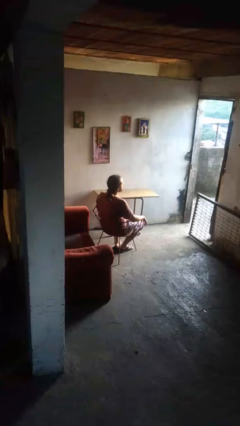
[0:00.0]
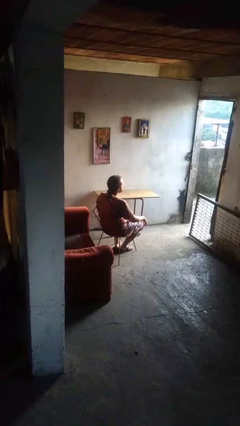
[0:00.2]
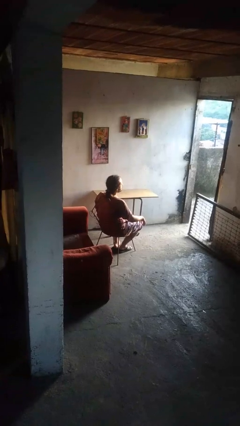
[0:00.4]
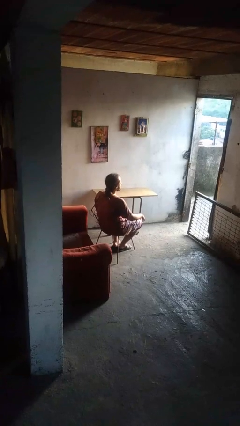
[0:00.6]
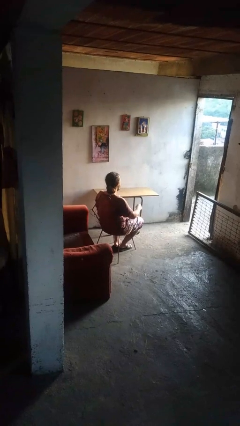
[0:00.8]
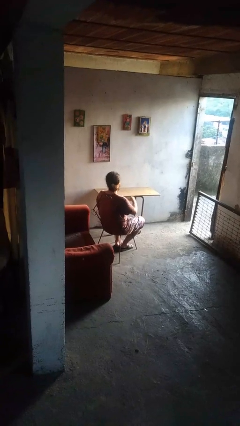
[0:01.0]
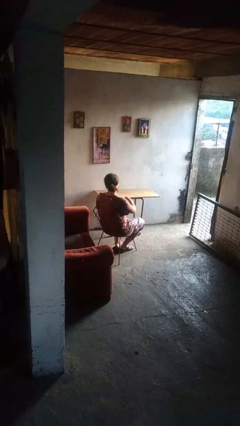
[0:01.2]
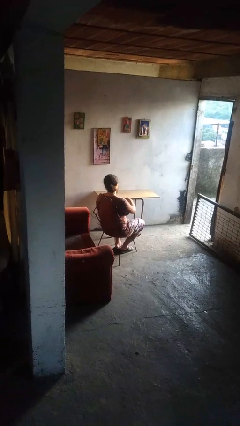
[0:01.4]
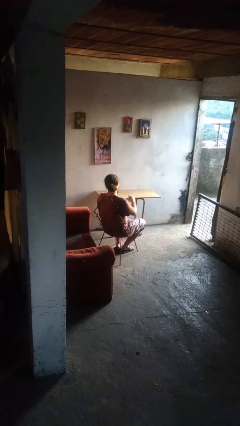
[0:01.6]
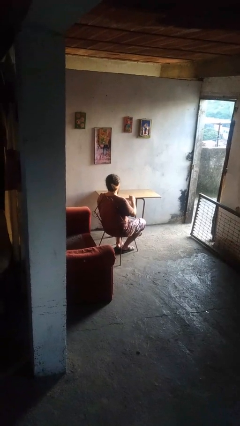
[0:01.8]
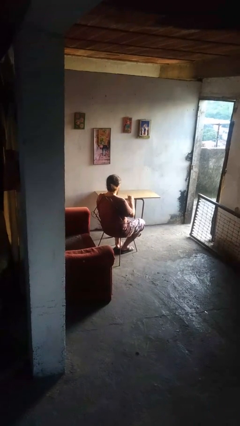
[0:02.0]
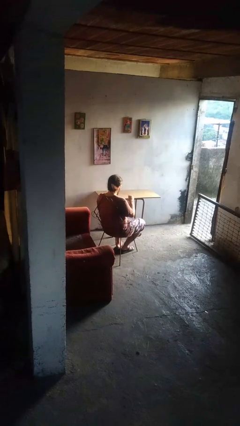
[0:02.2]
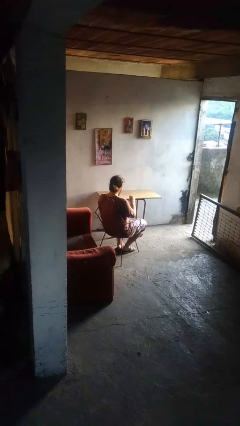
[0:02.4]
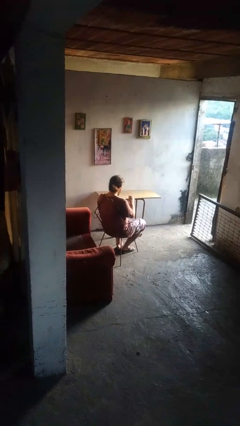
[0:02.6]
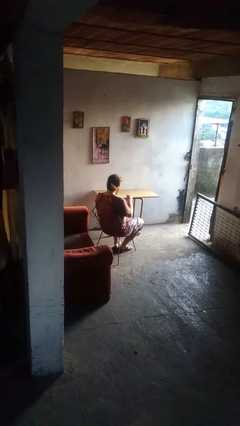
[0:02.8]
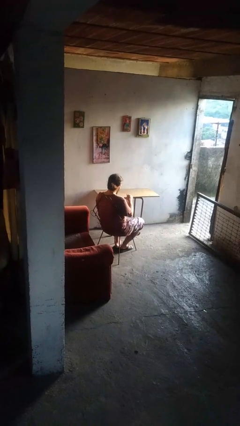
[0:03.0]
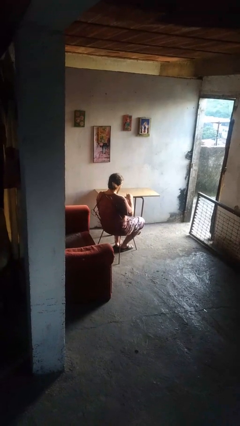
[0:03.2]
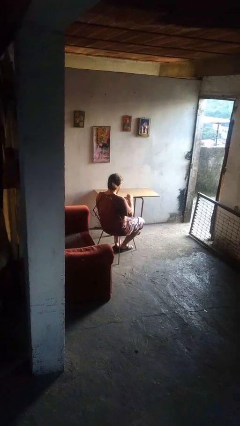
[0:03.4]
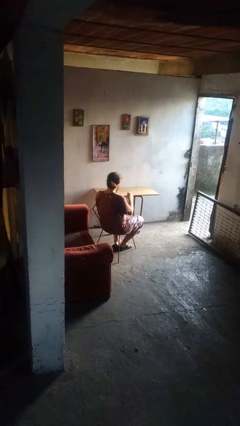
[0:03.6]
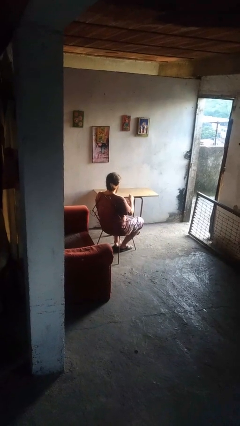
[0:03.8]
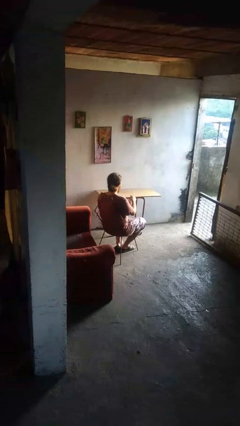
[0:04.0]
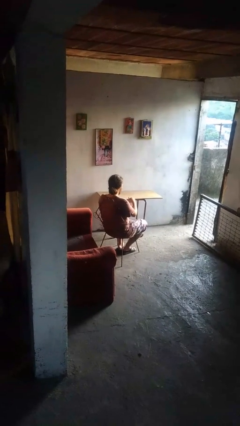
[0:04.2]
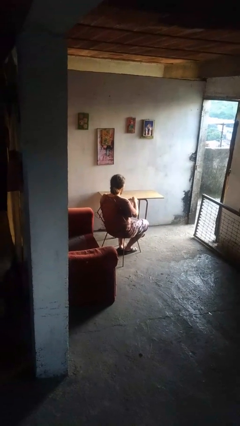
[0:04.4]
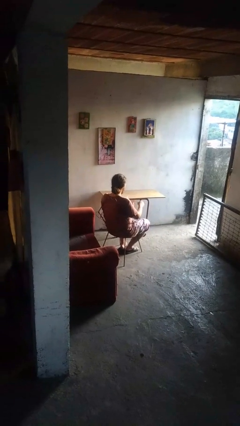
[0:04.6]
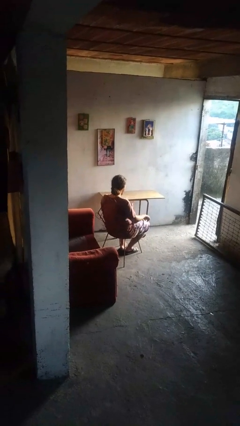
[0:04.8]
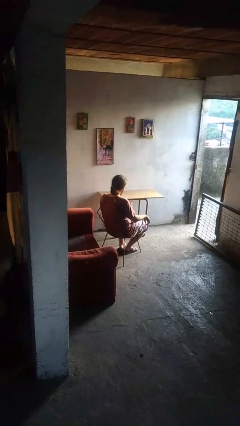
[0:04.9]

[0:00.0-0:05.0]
person stirs mug

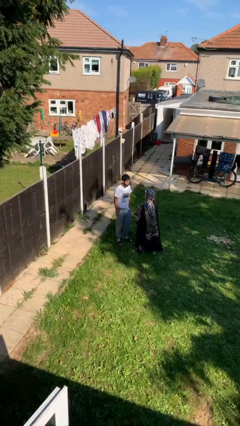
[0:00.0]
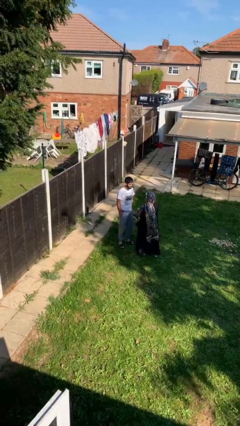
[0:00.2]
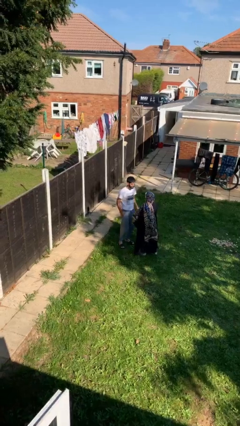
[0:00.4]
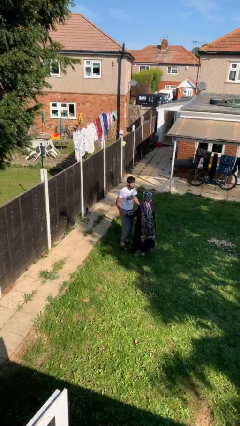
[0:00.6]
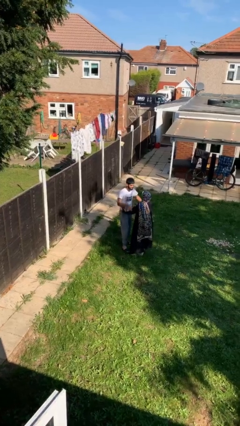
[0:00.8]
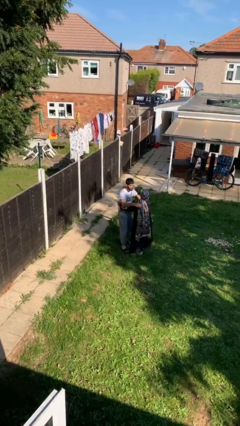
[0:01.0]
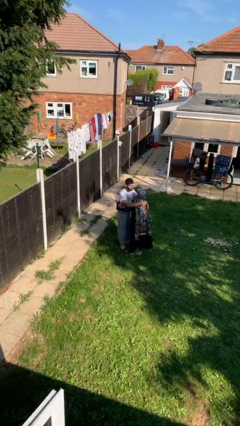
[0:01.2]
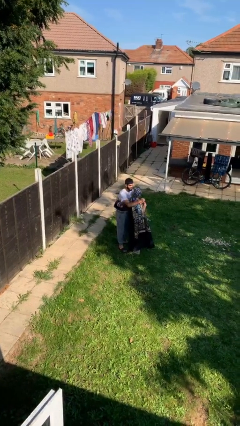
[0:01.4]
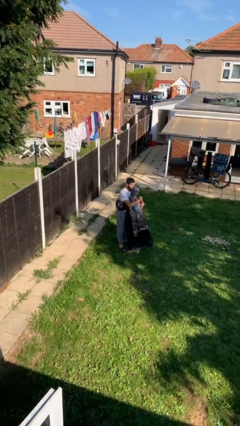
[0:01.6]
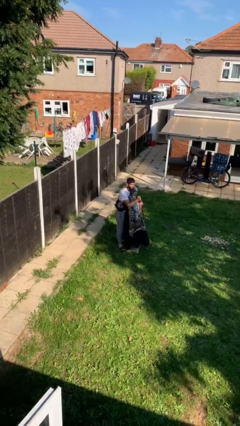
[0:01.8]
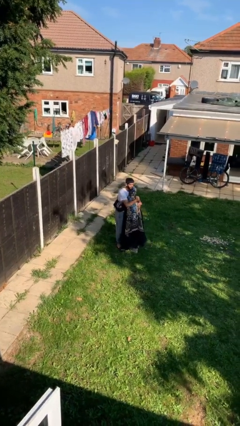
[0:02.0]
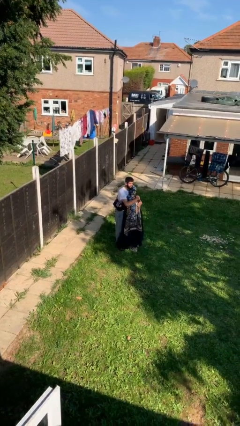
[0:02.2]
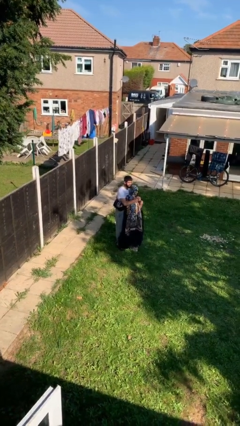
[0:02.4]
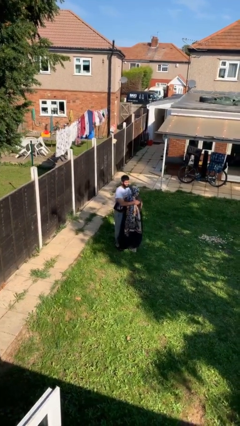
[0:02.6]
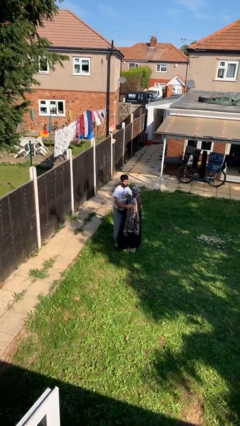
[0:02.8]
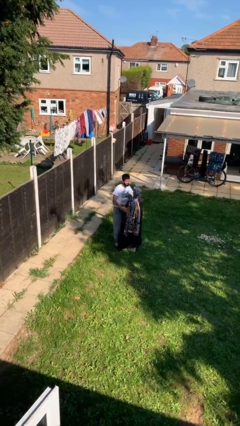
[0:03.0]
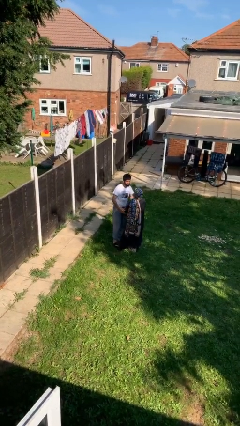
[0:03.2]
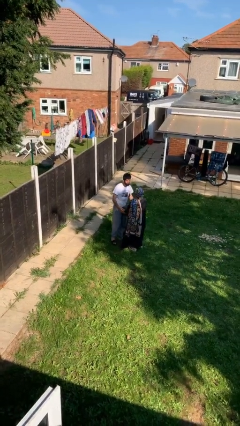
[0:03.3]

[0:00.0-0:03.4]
person embraces person

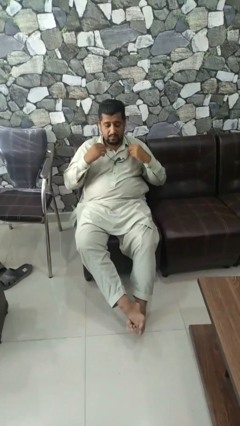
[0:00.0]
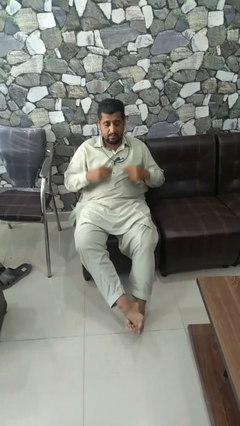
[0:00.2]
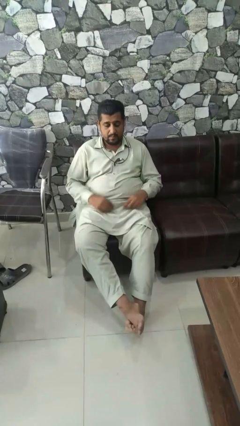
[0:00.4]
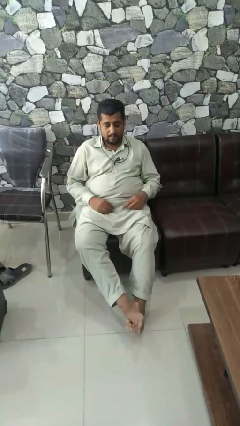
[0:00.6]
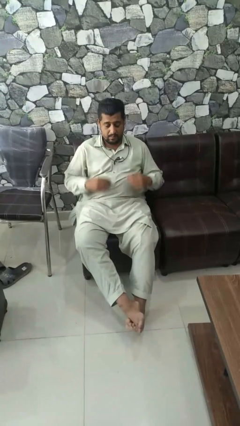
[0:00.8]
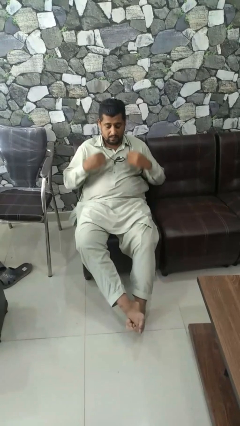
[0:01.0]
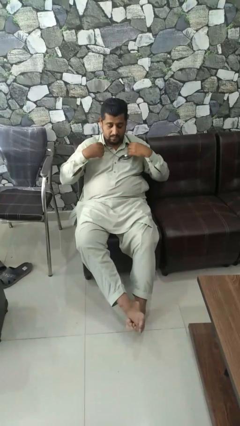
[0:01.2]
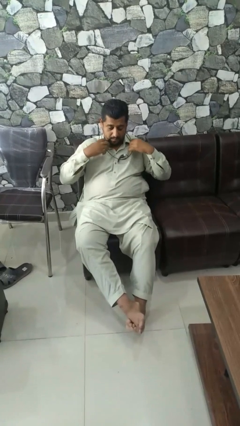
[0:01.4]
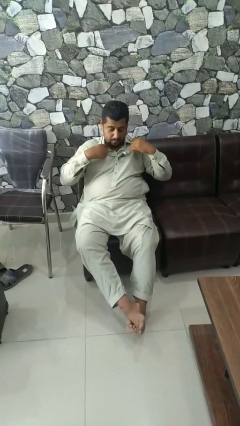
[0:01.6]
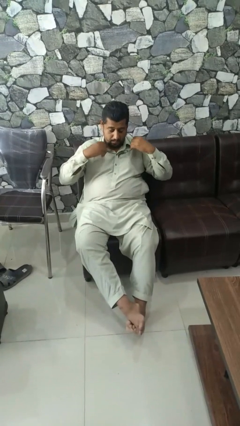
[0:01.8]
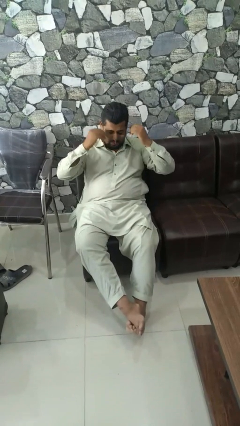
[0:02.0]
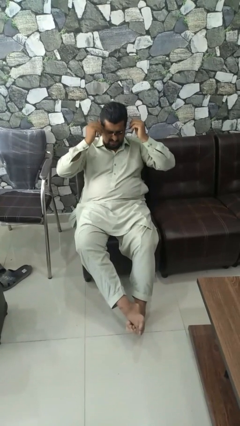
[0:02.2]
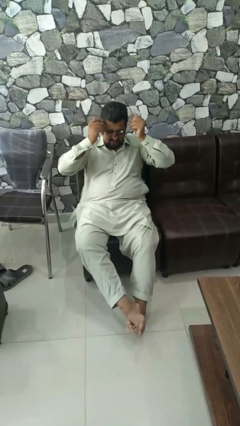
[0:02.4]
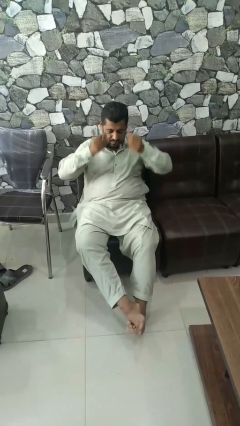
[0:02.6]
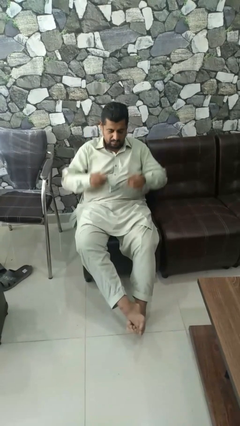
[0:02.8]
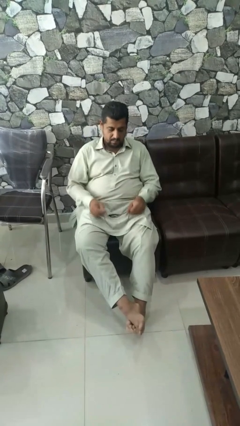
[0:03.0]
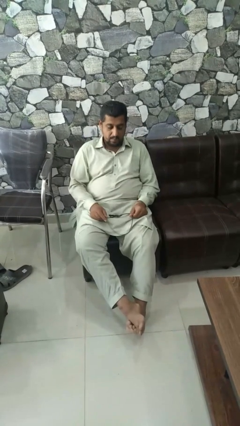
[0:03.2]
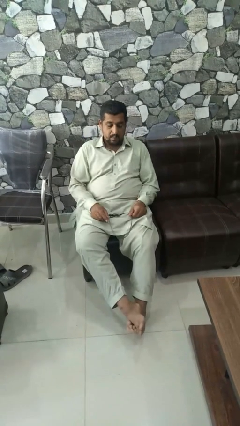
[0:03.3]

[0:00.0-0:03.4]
person takes off necklace

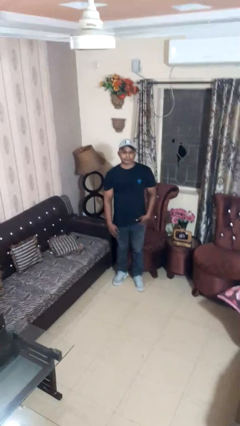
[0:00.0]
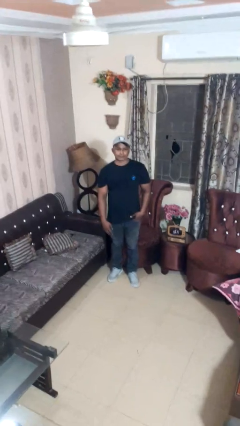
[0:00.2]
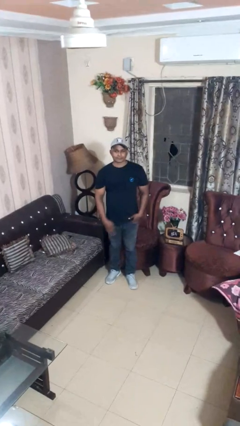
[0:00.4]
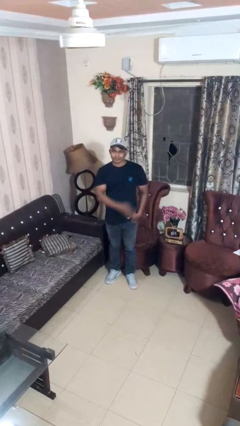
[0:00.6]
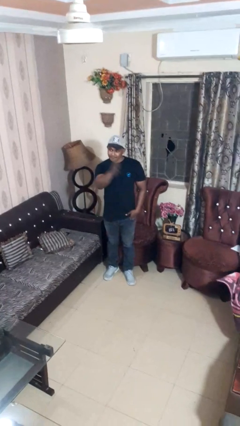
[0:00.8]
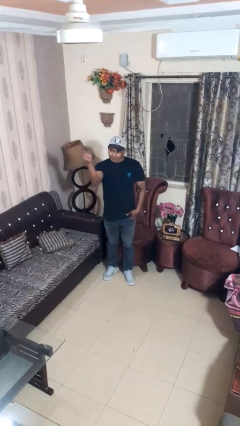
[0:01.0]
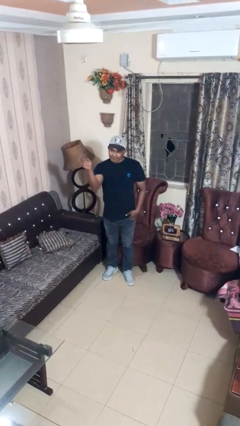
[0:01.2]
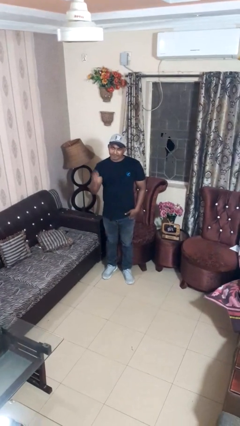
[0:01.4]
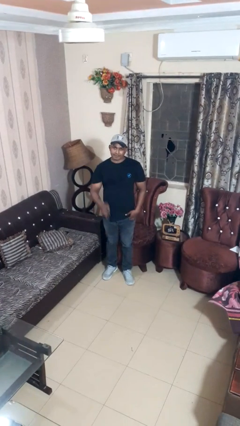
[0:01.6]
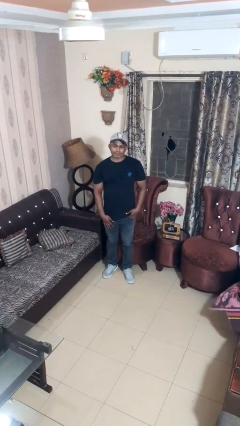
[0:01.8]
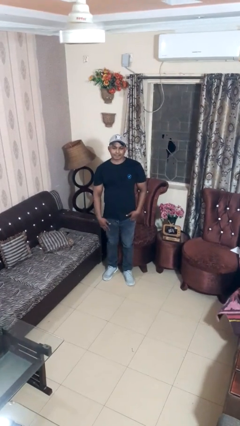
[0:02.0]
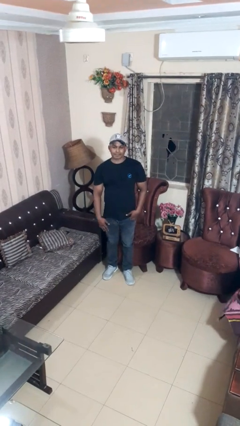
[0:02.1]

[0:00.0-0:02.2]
person gestures swipe left

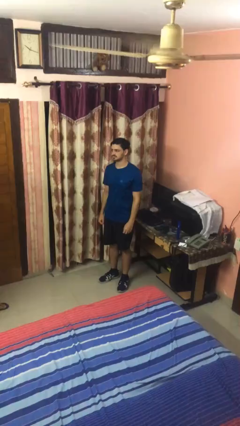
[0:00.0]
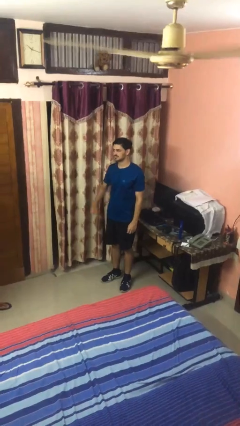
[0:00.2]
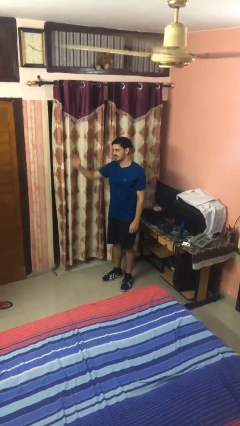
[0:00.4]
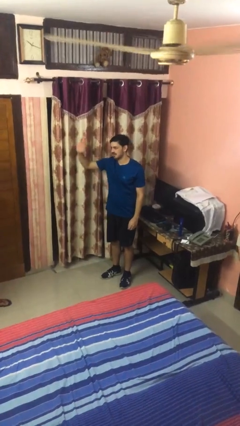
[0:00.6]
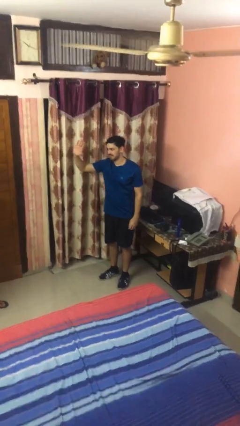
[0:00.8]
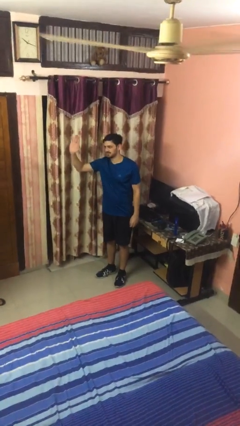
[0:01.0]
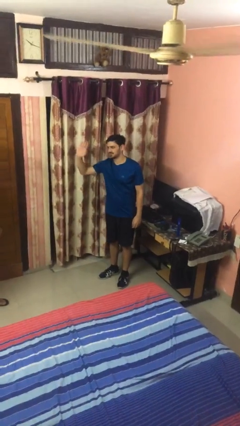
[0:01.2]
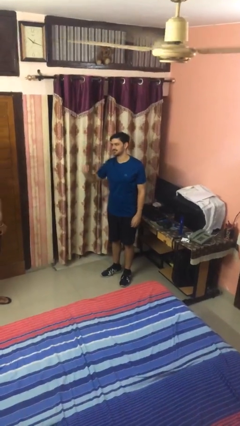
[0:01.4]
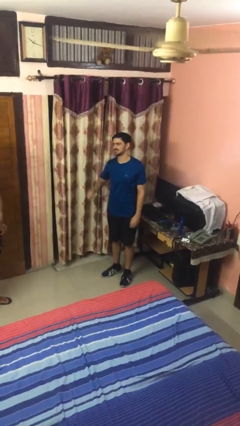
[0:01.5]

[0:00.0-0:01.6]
person waves at person

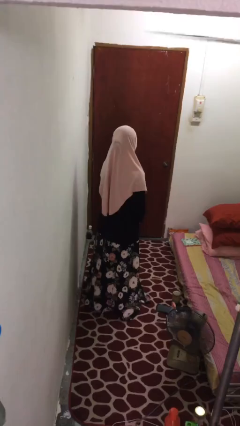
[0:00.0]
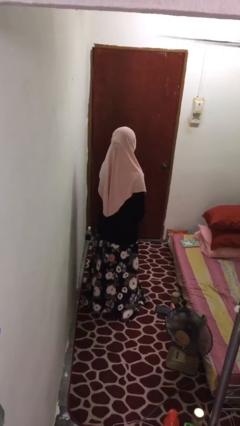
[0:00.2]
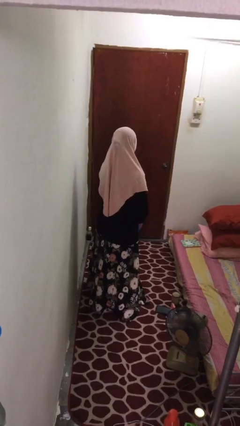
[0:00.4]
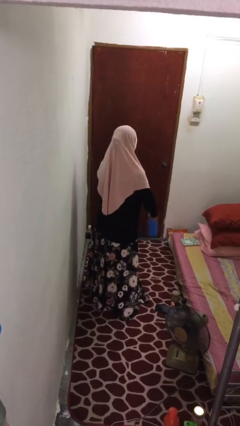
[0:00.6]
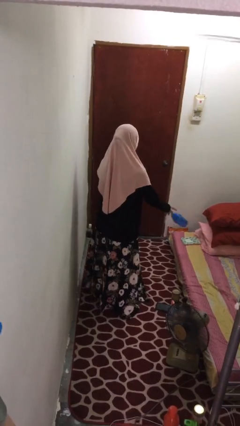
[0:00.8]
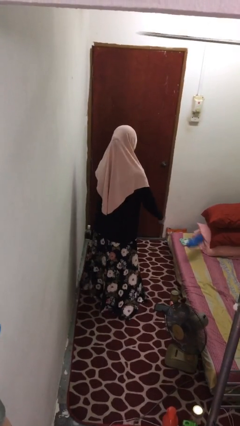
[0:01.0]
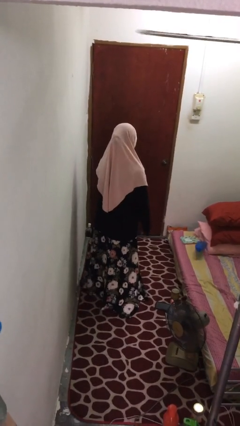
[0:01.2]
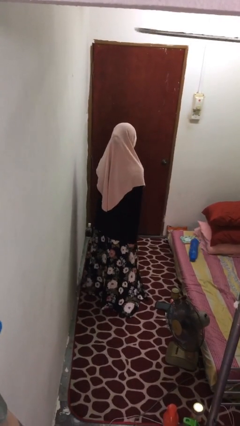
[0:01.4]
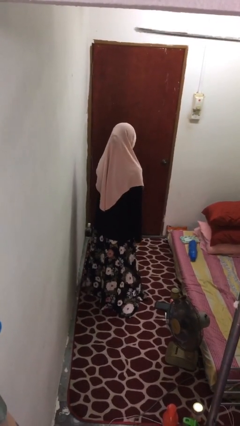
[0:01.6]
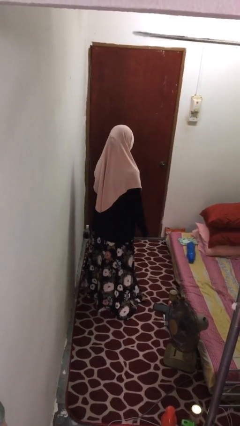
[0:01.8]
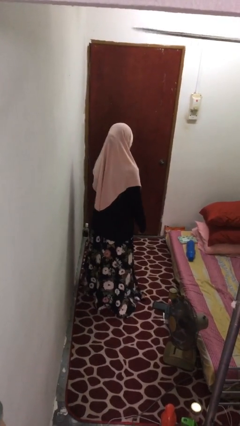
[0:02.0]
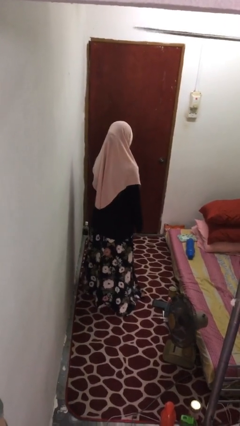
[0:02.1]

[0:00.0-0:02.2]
person throws object on bed
